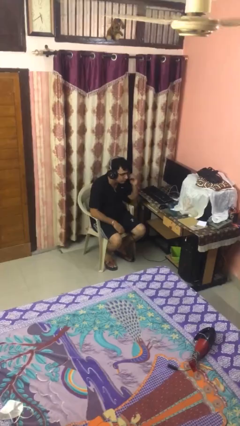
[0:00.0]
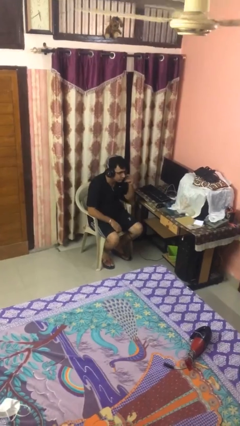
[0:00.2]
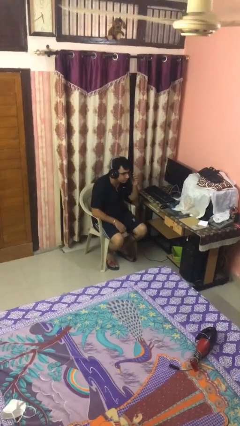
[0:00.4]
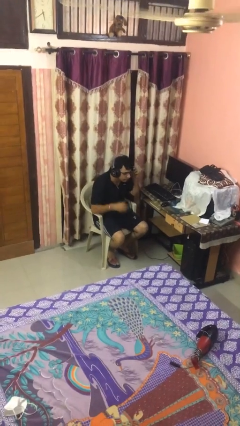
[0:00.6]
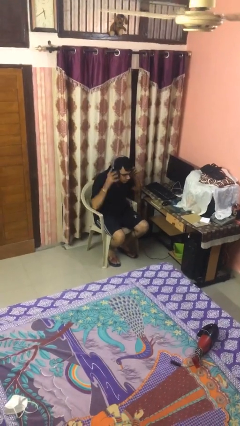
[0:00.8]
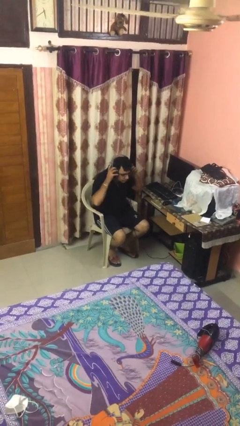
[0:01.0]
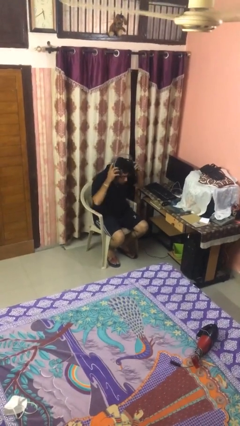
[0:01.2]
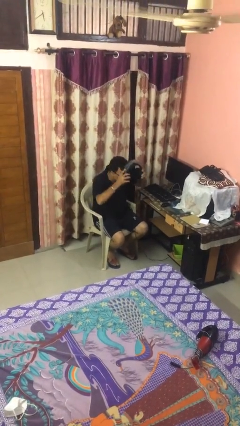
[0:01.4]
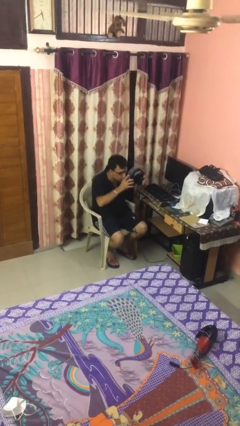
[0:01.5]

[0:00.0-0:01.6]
person takes off headphones

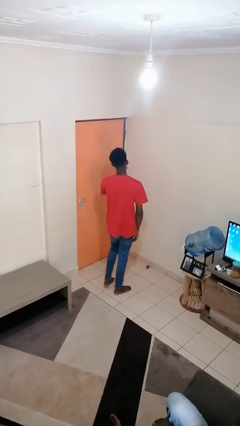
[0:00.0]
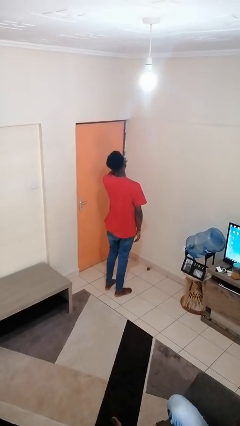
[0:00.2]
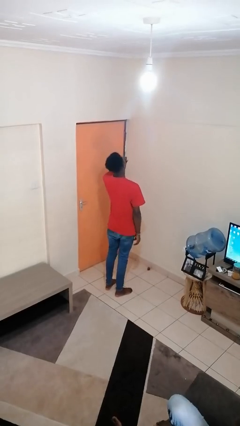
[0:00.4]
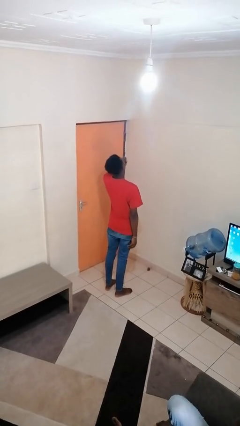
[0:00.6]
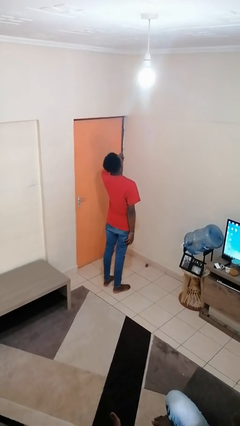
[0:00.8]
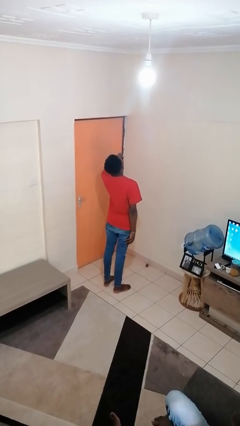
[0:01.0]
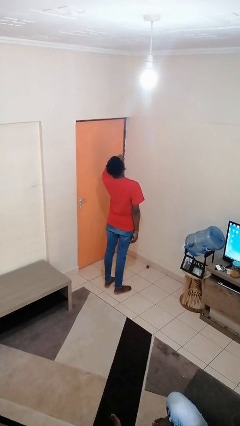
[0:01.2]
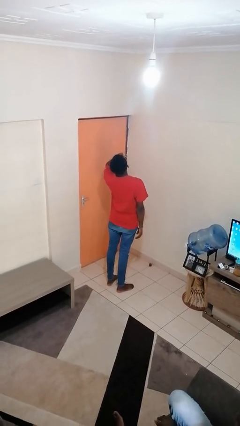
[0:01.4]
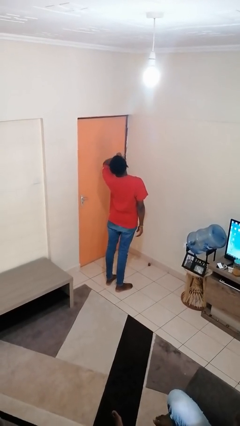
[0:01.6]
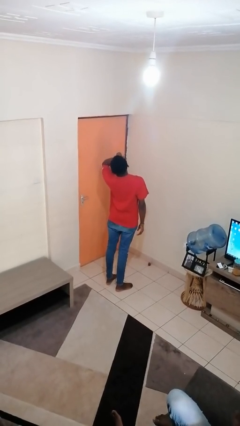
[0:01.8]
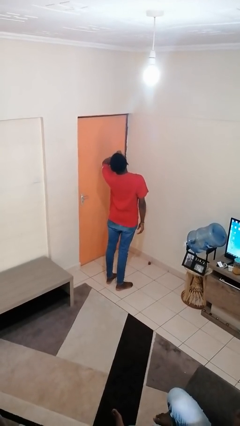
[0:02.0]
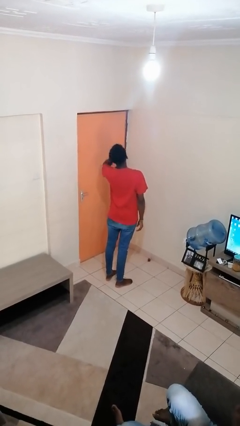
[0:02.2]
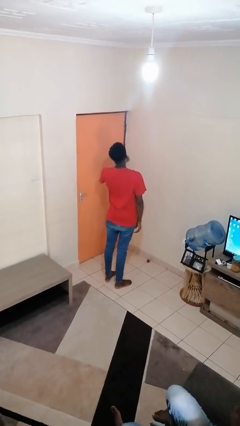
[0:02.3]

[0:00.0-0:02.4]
person yawns

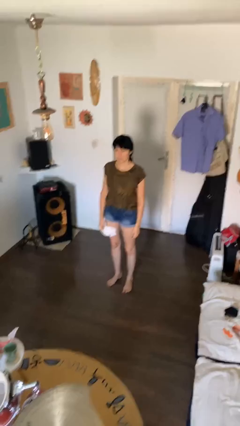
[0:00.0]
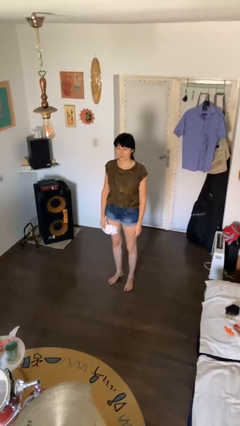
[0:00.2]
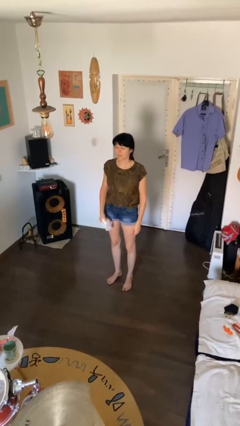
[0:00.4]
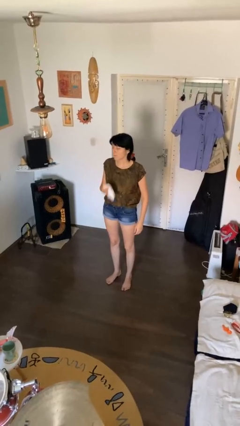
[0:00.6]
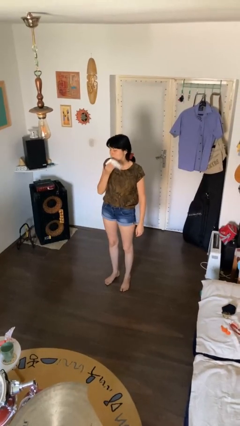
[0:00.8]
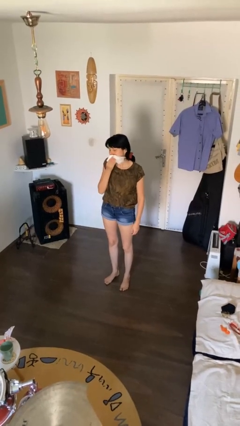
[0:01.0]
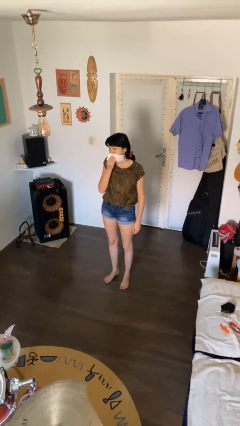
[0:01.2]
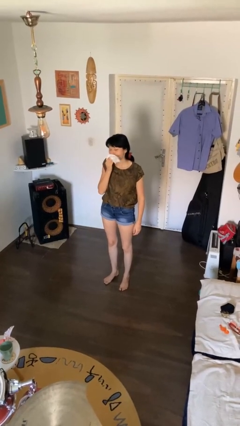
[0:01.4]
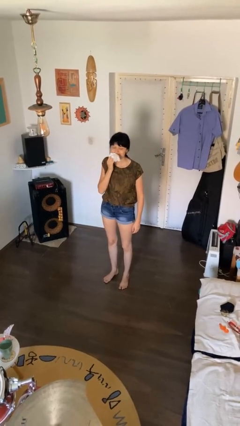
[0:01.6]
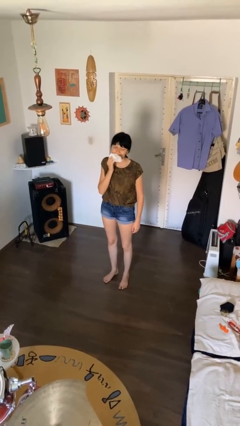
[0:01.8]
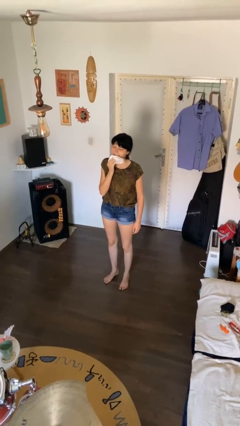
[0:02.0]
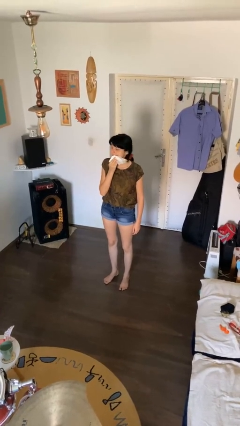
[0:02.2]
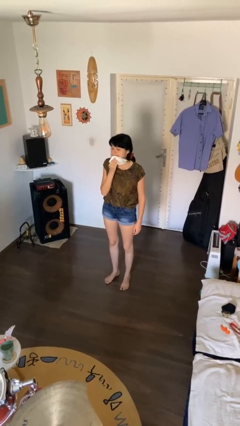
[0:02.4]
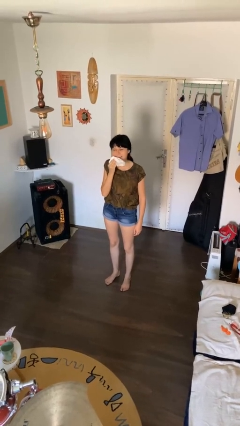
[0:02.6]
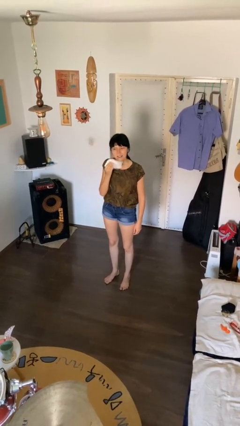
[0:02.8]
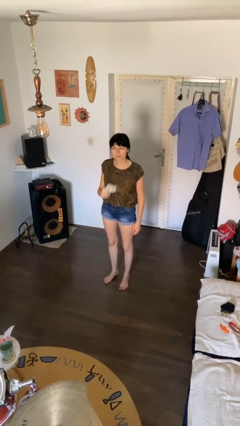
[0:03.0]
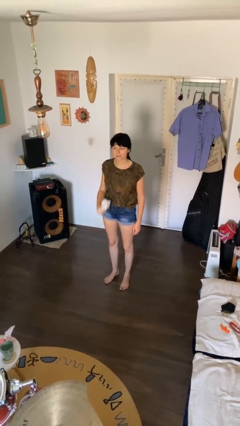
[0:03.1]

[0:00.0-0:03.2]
person wipes mouth with napkin

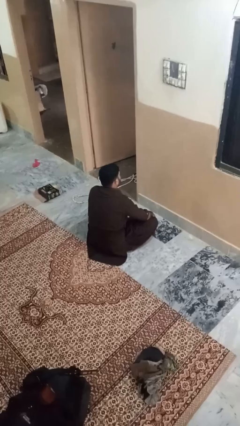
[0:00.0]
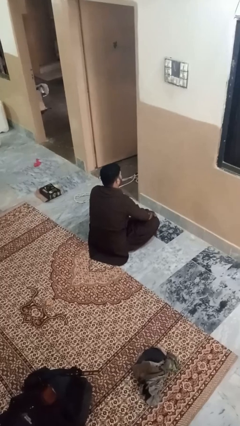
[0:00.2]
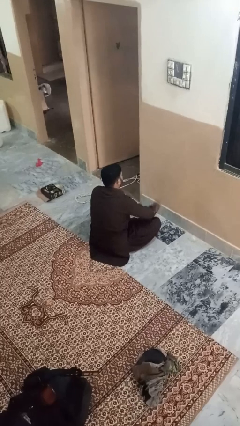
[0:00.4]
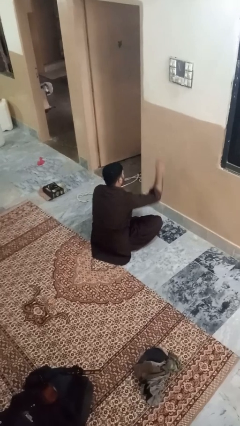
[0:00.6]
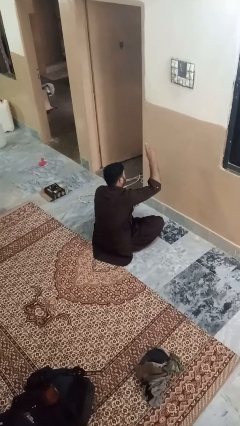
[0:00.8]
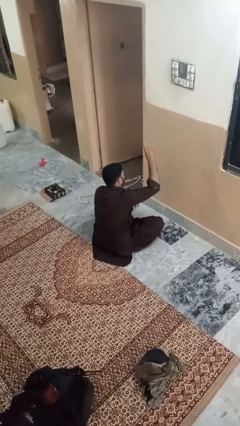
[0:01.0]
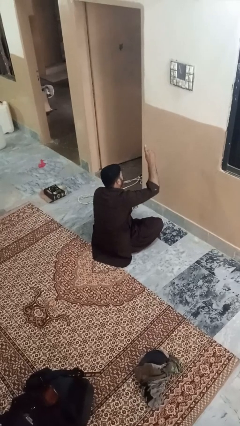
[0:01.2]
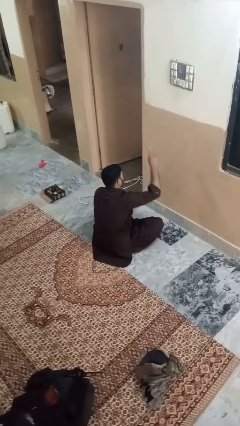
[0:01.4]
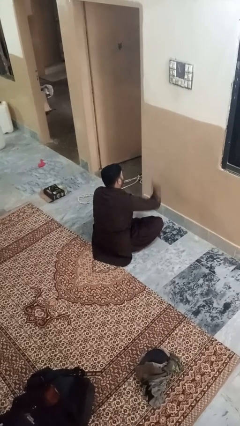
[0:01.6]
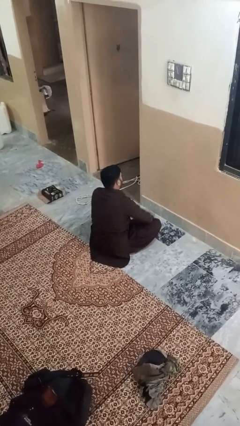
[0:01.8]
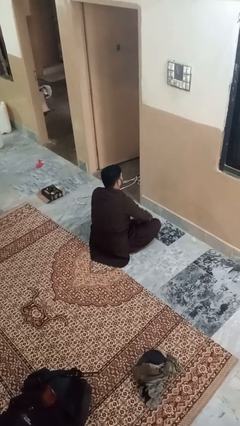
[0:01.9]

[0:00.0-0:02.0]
person gestures number one

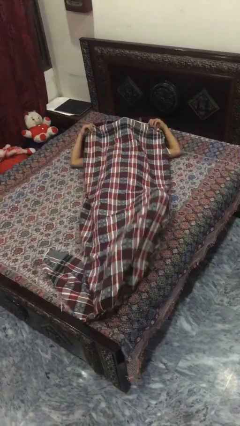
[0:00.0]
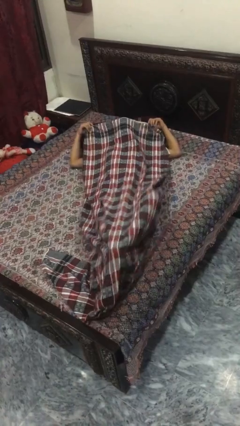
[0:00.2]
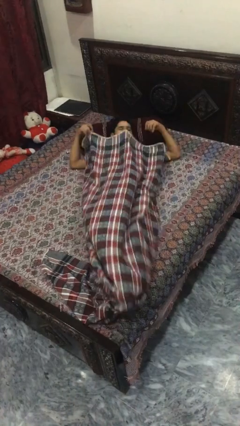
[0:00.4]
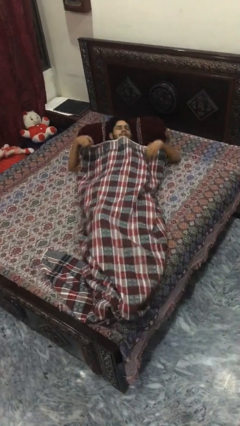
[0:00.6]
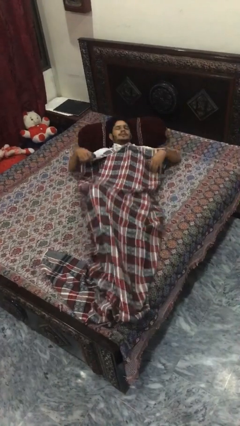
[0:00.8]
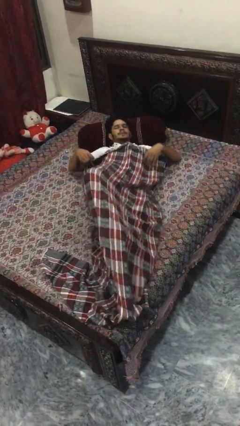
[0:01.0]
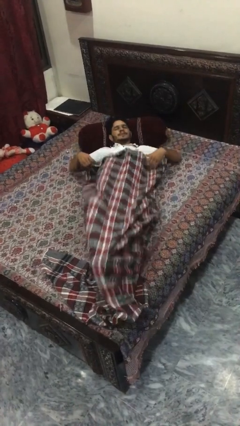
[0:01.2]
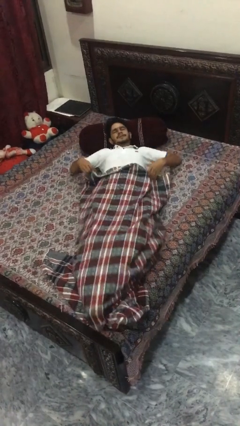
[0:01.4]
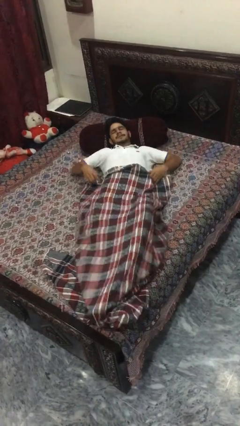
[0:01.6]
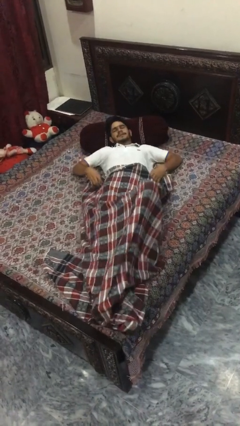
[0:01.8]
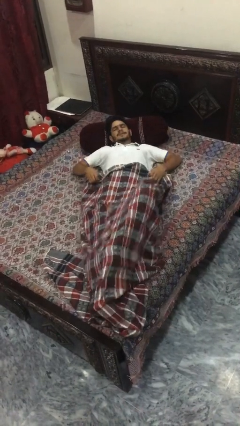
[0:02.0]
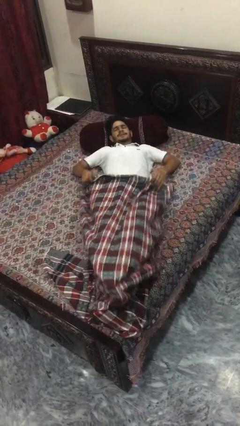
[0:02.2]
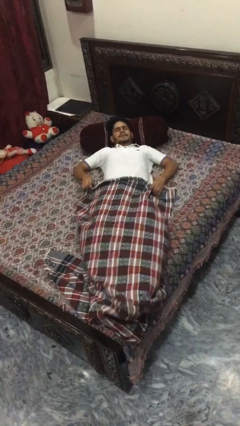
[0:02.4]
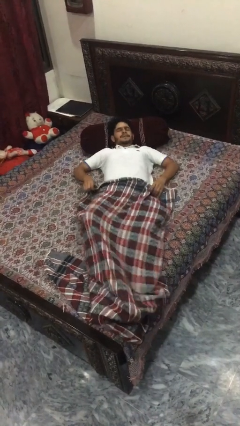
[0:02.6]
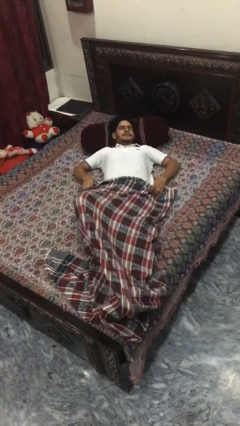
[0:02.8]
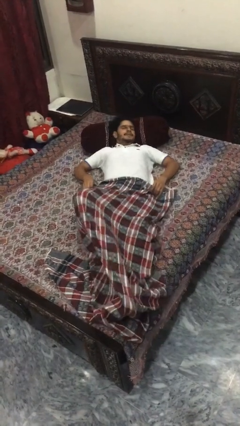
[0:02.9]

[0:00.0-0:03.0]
person uncovers with bedsheets

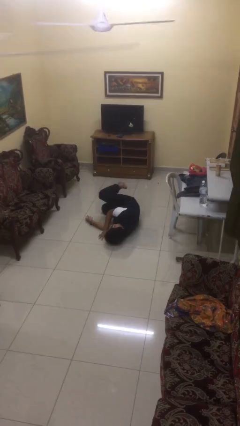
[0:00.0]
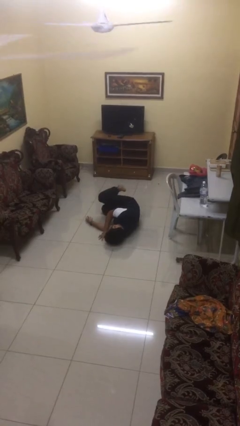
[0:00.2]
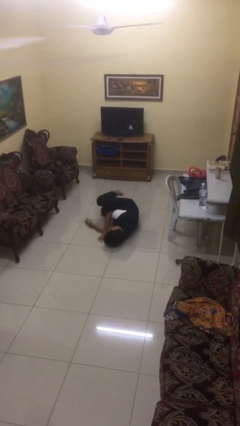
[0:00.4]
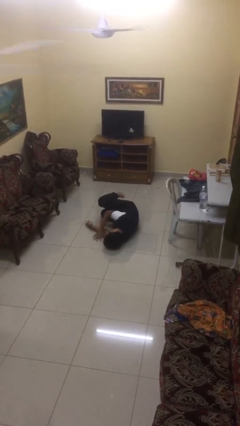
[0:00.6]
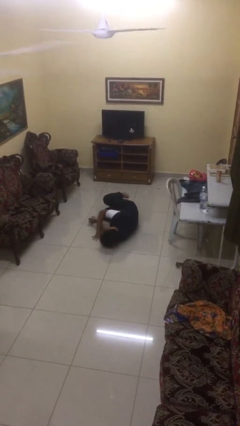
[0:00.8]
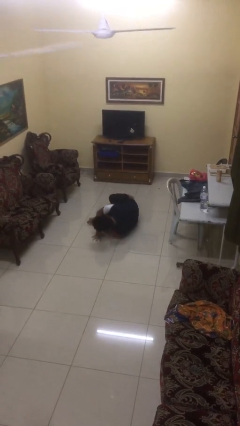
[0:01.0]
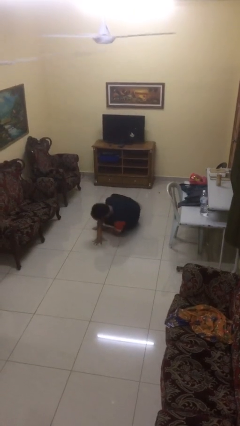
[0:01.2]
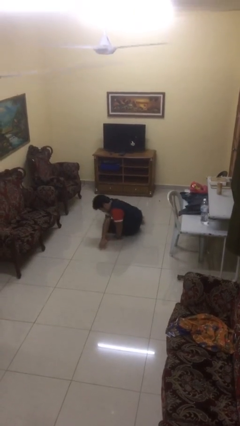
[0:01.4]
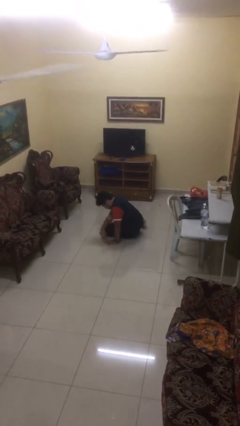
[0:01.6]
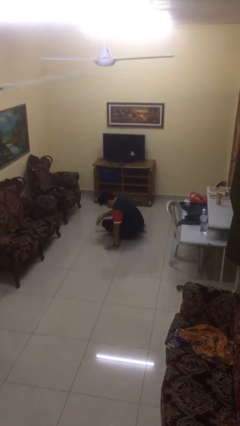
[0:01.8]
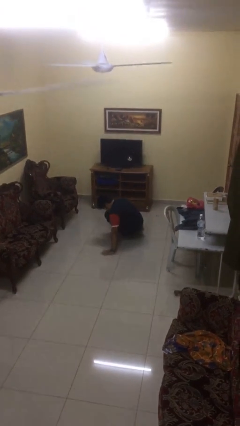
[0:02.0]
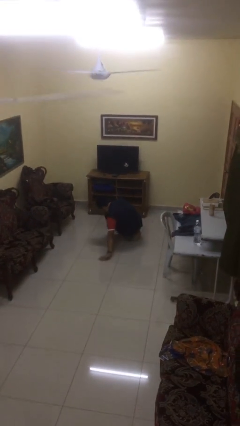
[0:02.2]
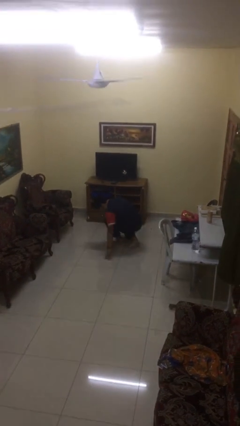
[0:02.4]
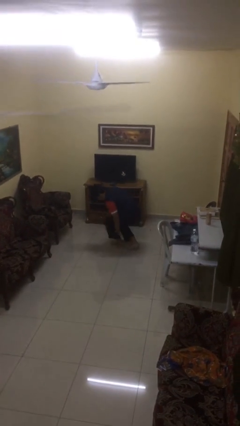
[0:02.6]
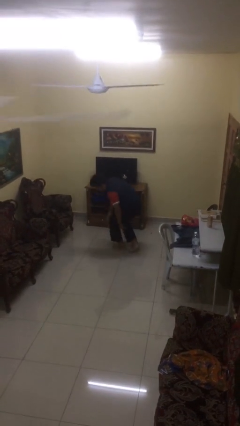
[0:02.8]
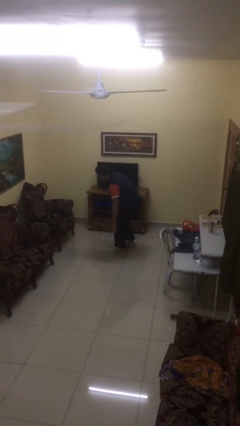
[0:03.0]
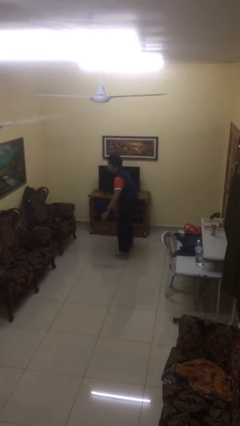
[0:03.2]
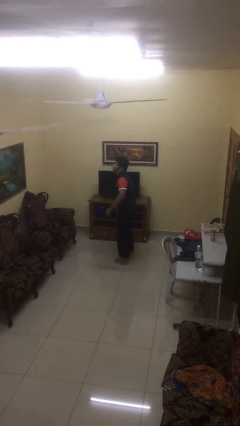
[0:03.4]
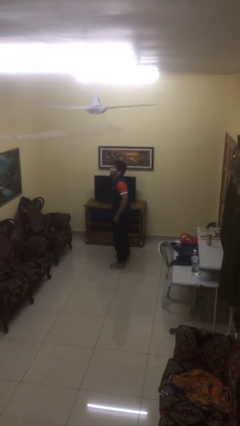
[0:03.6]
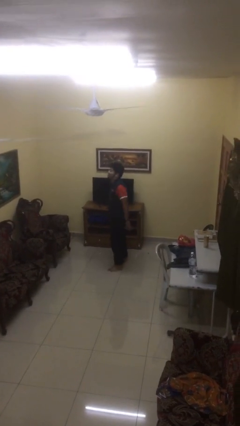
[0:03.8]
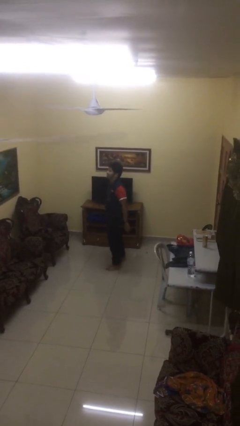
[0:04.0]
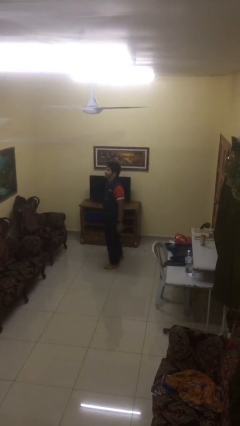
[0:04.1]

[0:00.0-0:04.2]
person stands up from floor

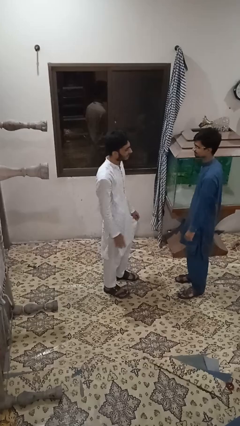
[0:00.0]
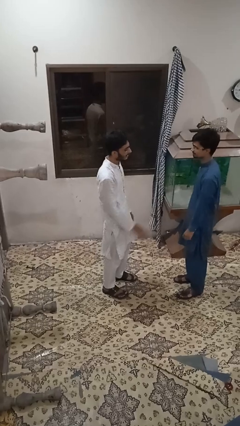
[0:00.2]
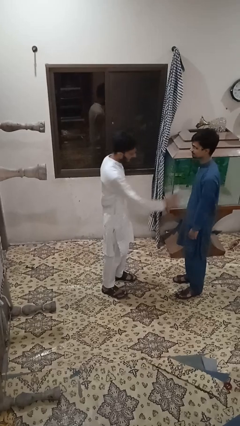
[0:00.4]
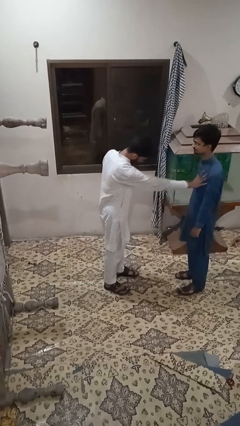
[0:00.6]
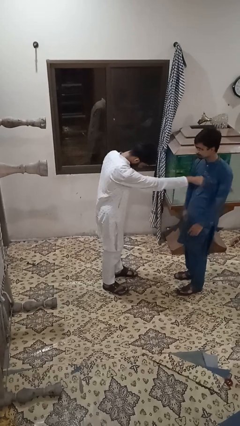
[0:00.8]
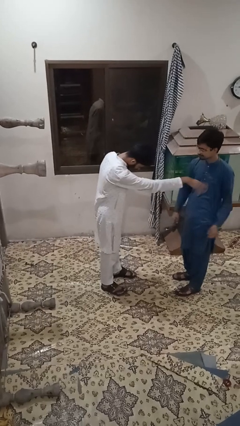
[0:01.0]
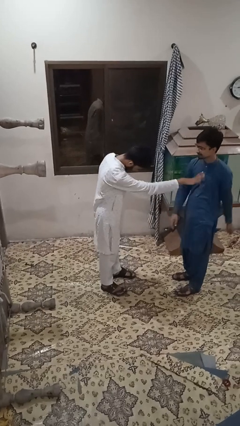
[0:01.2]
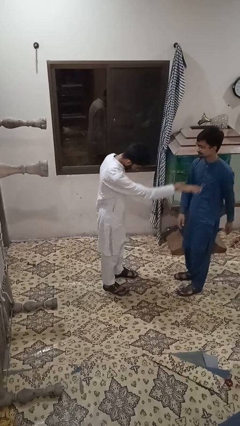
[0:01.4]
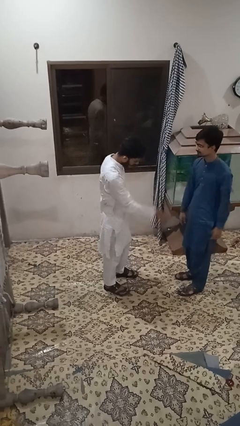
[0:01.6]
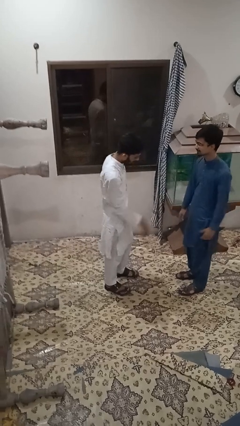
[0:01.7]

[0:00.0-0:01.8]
person shoves person
